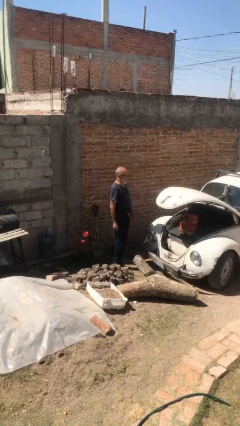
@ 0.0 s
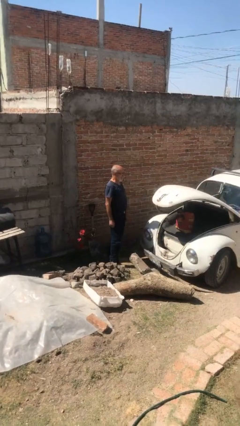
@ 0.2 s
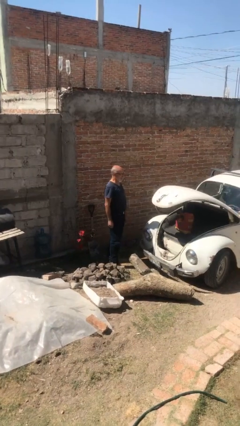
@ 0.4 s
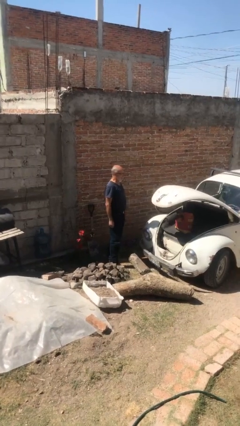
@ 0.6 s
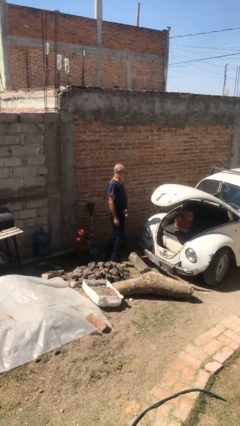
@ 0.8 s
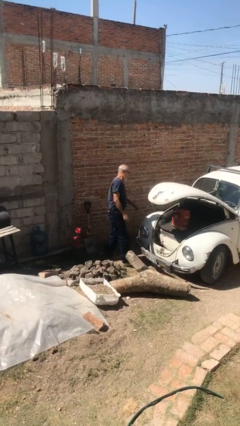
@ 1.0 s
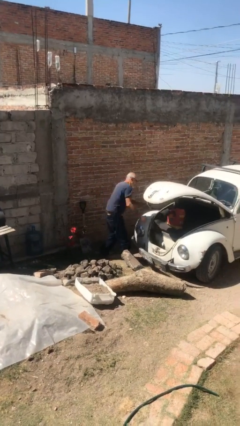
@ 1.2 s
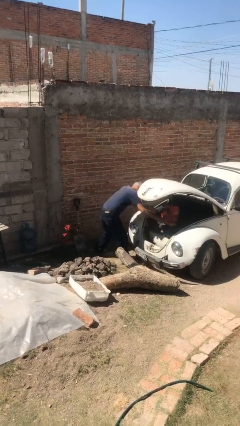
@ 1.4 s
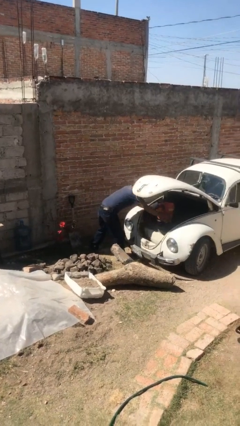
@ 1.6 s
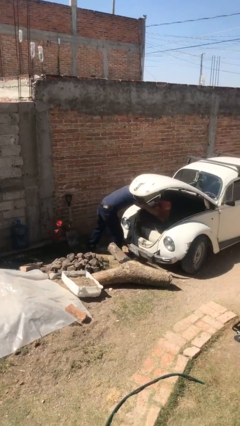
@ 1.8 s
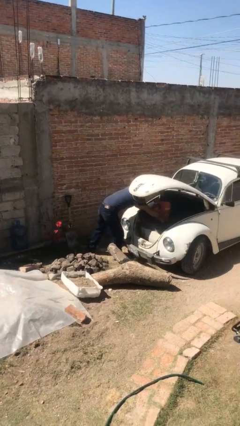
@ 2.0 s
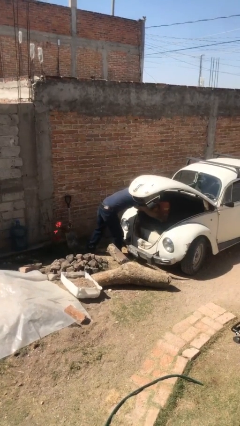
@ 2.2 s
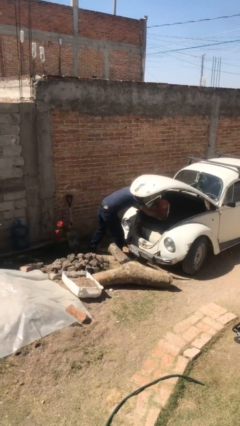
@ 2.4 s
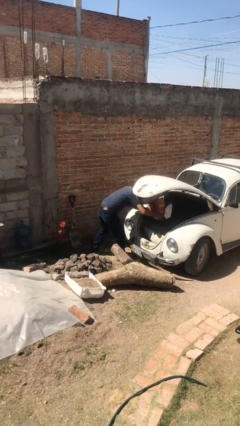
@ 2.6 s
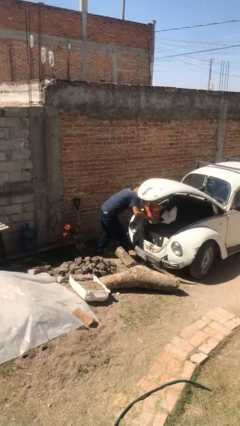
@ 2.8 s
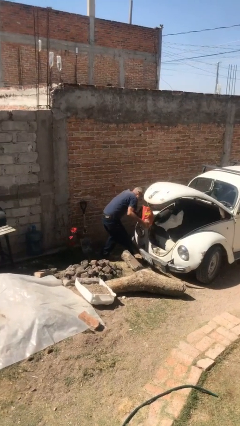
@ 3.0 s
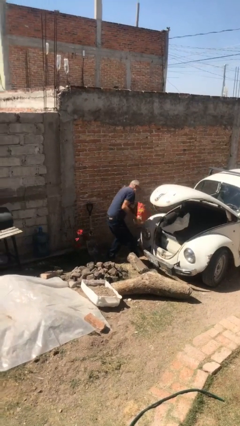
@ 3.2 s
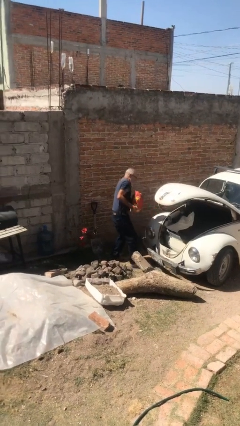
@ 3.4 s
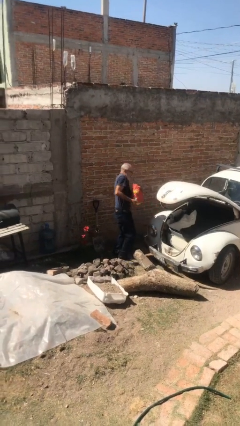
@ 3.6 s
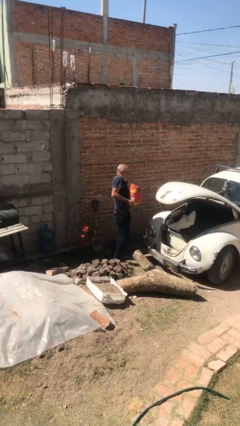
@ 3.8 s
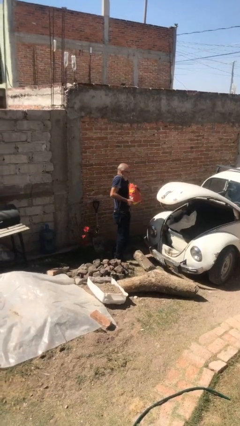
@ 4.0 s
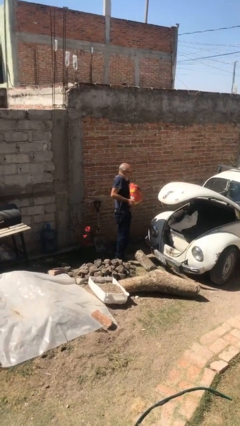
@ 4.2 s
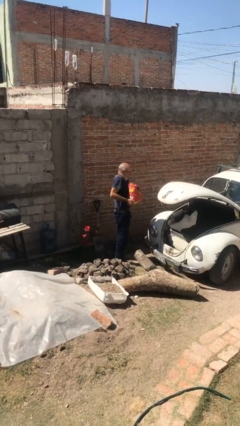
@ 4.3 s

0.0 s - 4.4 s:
person unloads car

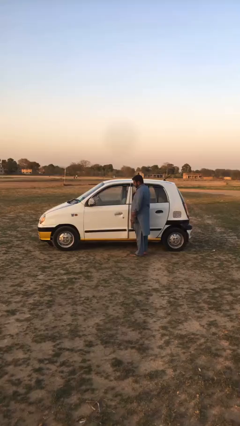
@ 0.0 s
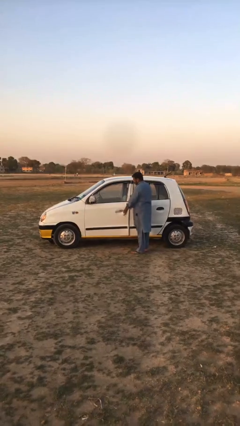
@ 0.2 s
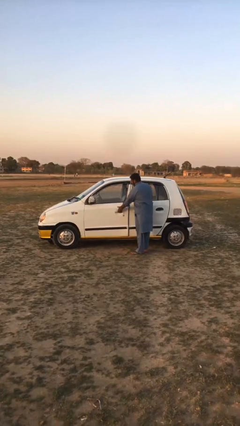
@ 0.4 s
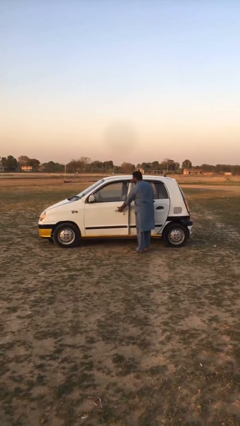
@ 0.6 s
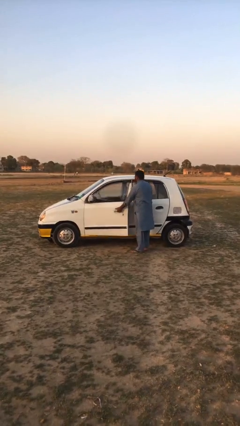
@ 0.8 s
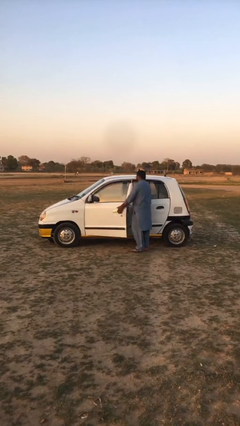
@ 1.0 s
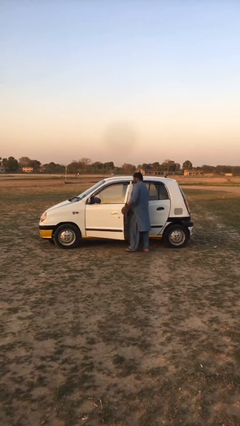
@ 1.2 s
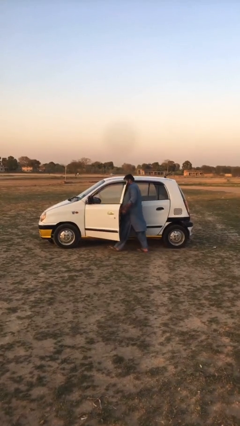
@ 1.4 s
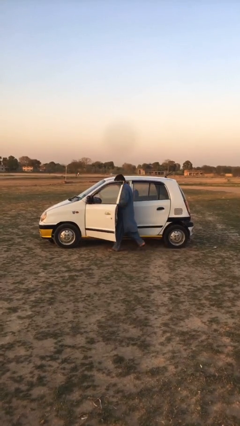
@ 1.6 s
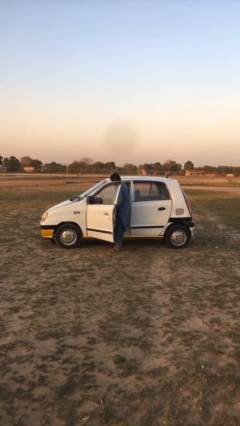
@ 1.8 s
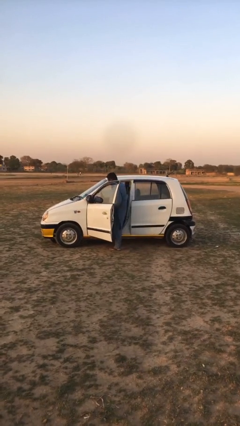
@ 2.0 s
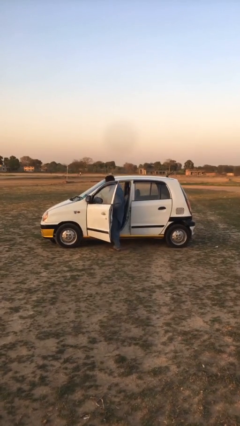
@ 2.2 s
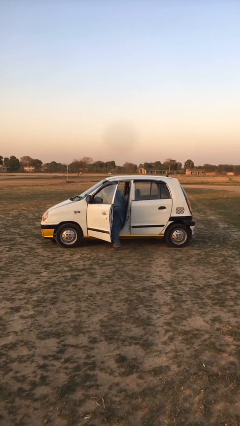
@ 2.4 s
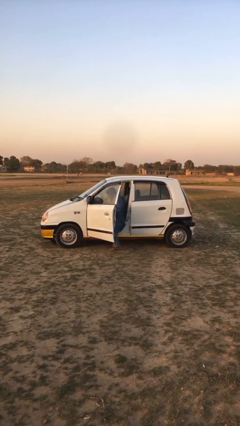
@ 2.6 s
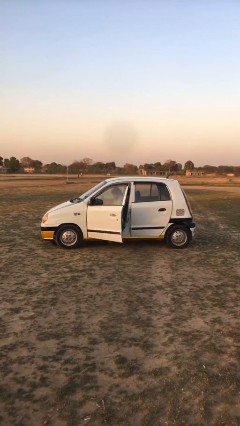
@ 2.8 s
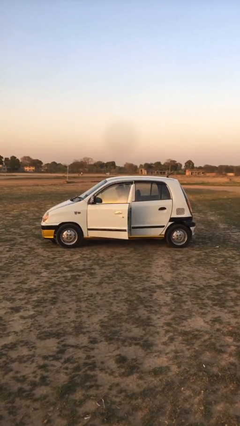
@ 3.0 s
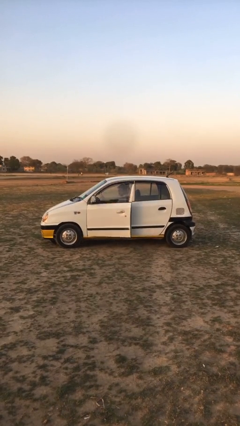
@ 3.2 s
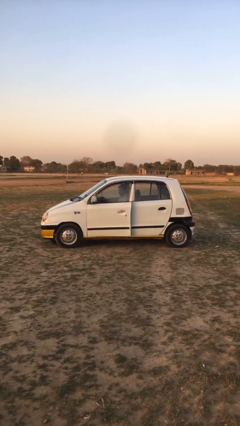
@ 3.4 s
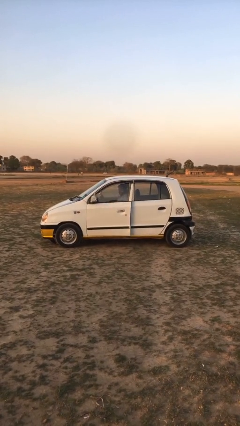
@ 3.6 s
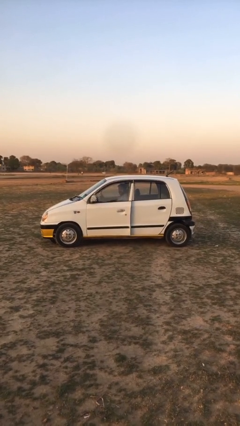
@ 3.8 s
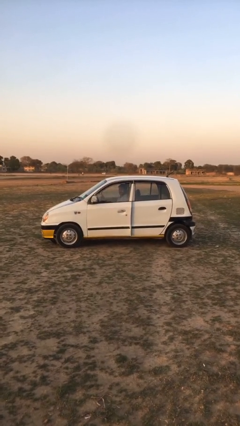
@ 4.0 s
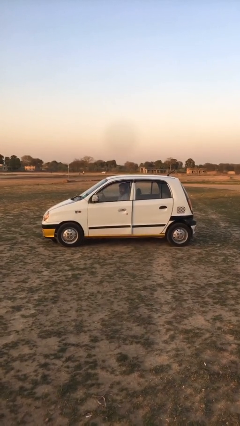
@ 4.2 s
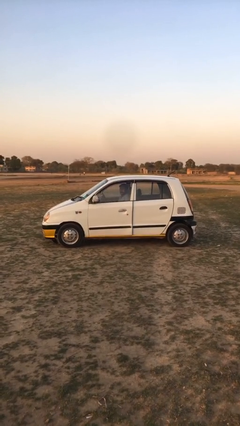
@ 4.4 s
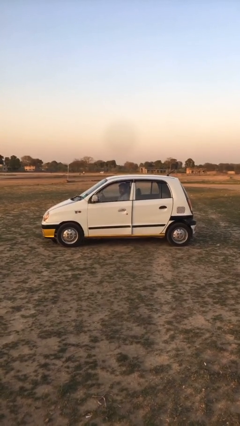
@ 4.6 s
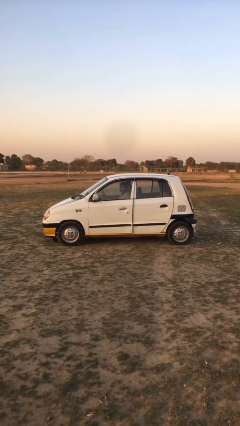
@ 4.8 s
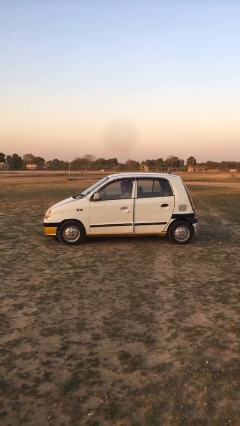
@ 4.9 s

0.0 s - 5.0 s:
car picks up person

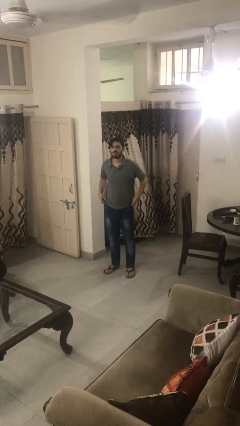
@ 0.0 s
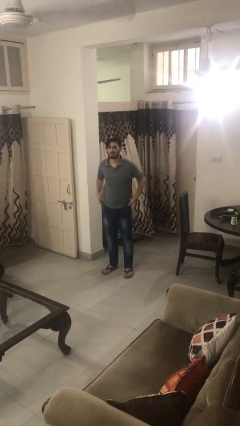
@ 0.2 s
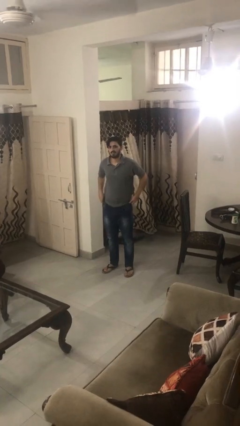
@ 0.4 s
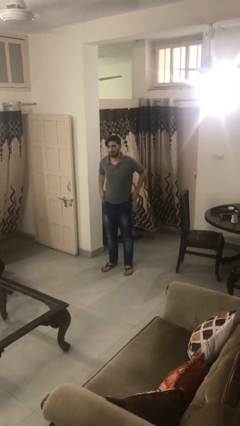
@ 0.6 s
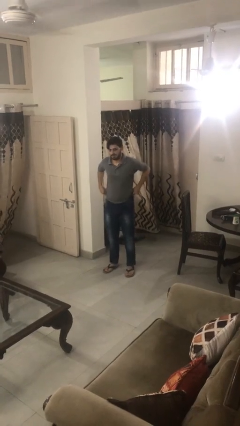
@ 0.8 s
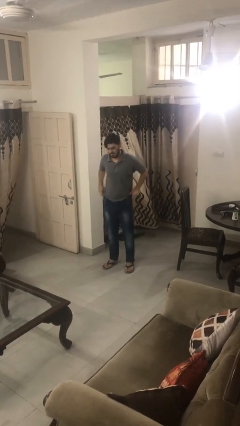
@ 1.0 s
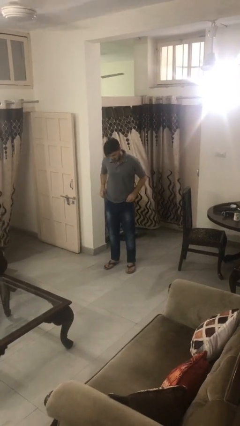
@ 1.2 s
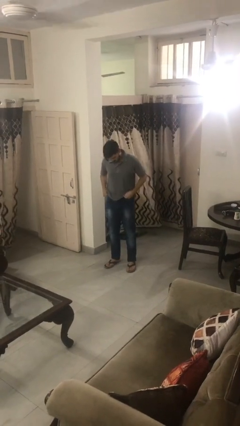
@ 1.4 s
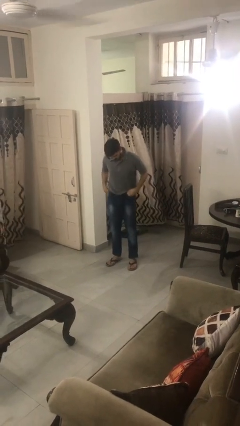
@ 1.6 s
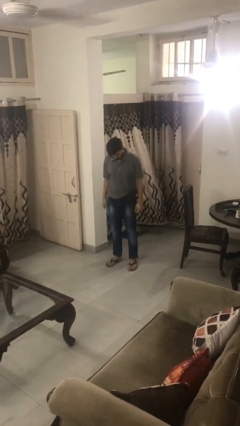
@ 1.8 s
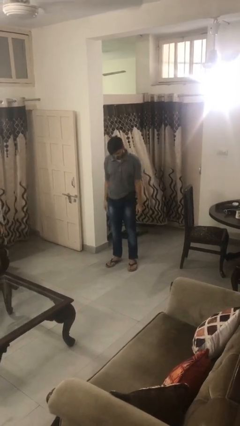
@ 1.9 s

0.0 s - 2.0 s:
person hikes up pants

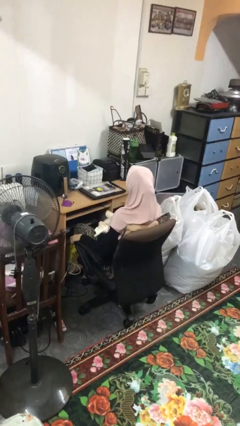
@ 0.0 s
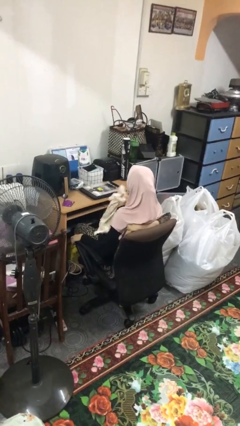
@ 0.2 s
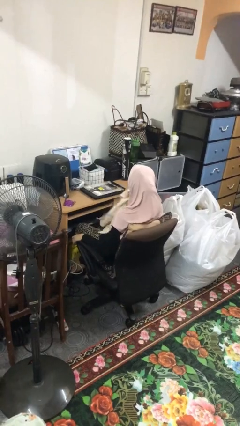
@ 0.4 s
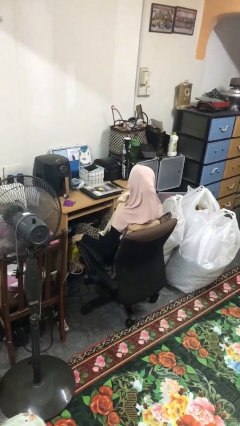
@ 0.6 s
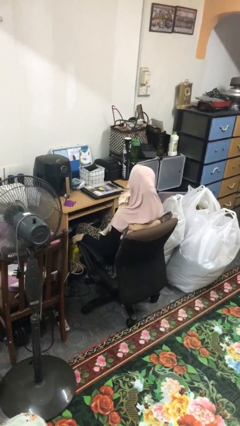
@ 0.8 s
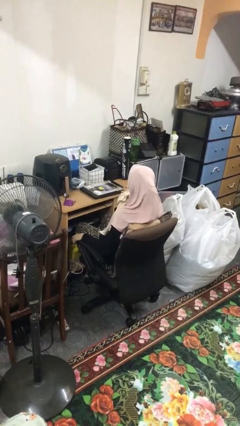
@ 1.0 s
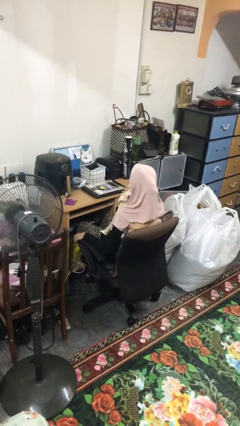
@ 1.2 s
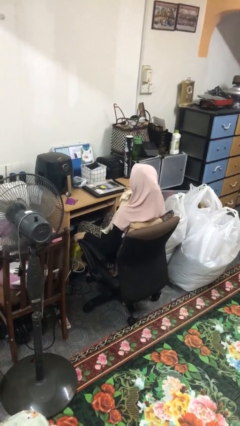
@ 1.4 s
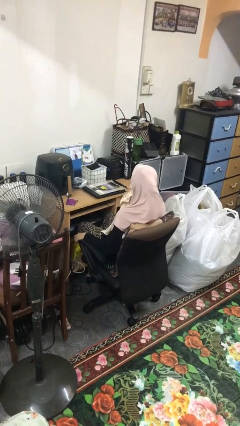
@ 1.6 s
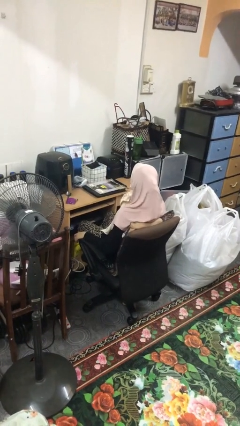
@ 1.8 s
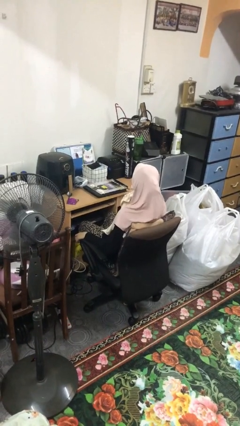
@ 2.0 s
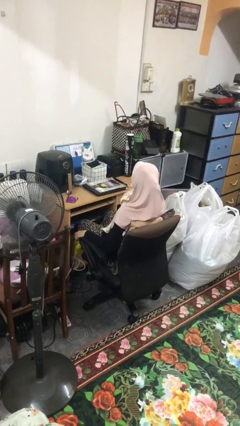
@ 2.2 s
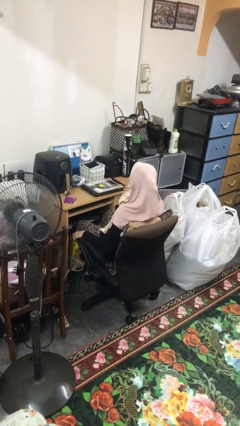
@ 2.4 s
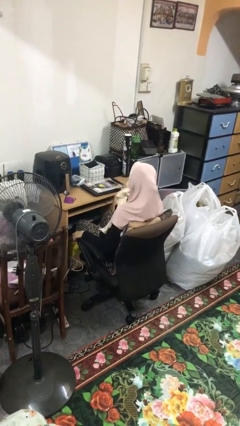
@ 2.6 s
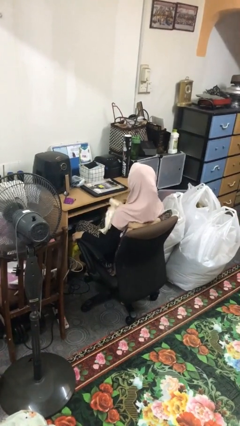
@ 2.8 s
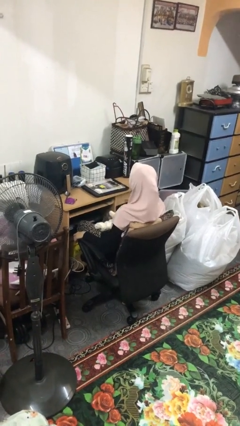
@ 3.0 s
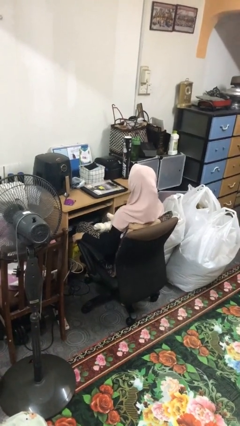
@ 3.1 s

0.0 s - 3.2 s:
person wipes mouth with napkin

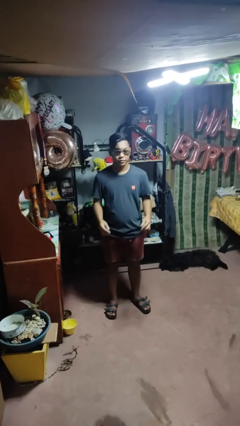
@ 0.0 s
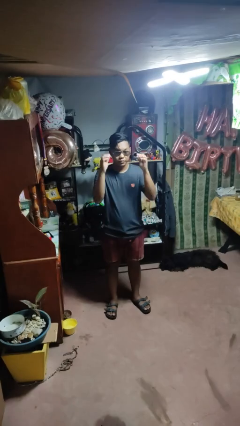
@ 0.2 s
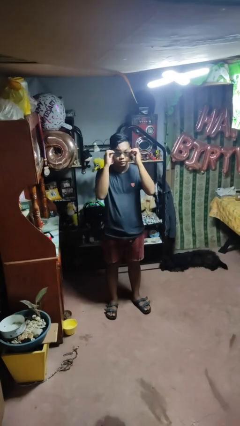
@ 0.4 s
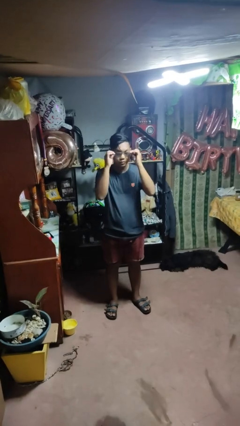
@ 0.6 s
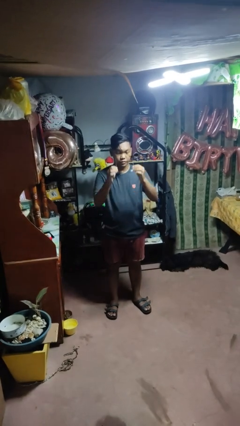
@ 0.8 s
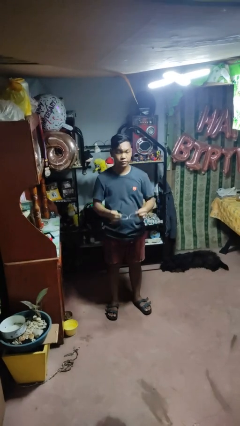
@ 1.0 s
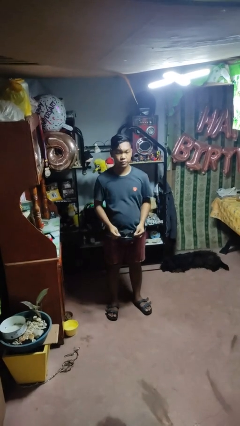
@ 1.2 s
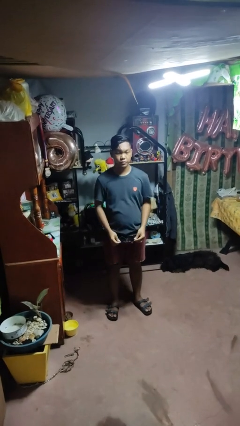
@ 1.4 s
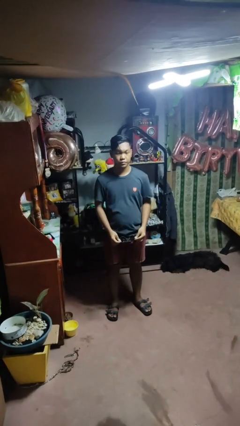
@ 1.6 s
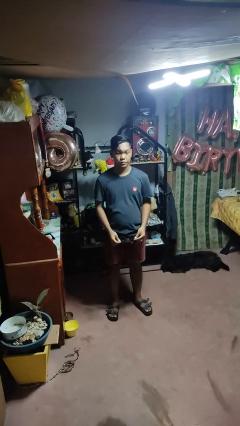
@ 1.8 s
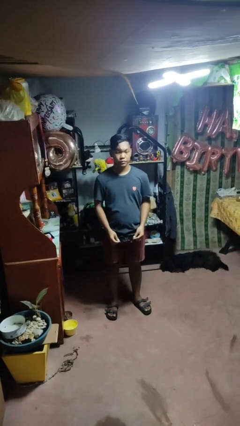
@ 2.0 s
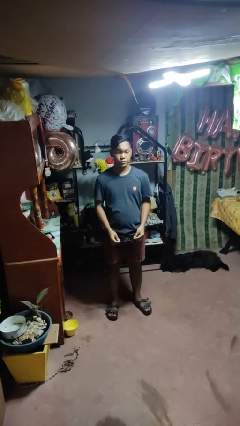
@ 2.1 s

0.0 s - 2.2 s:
person takes off sunglasses

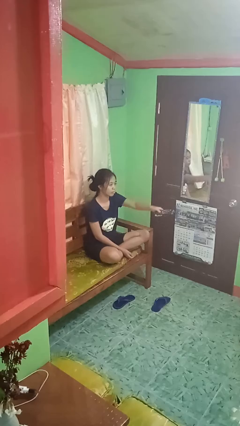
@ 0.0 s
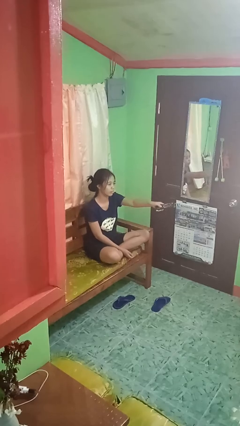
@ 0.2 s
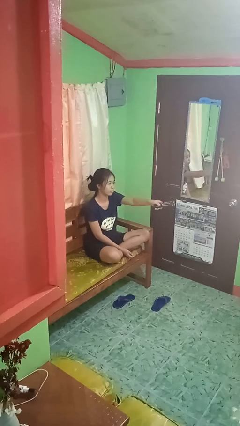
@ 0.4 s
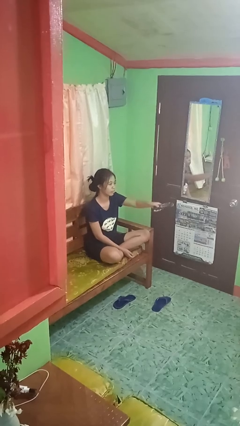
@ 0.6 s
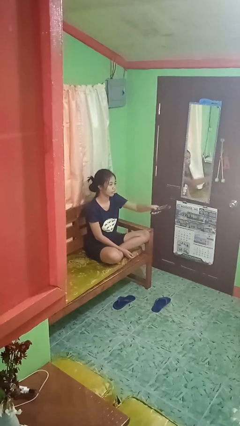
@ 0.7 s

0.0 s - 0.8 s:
person uses television remote
